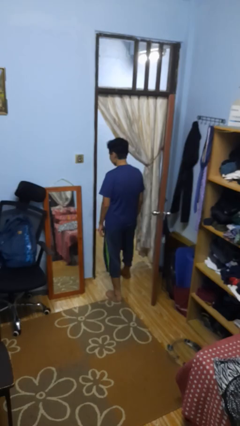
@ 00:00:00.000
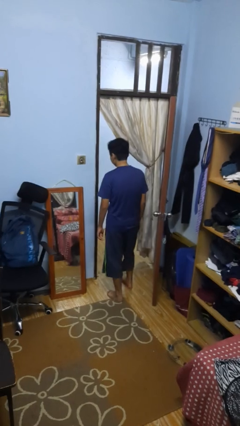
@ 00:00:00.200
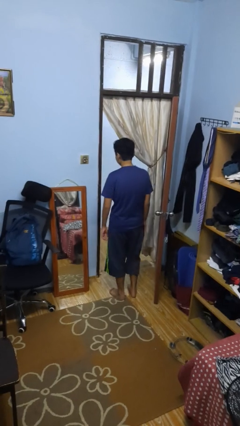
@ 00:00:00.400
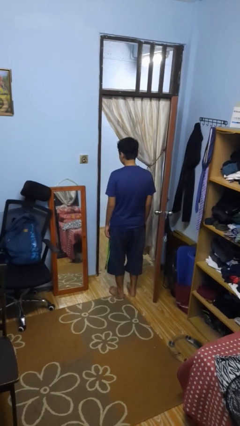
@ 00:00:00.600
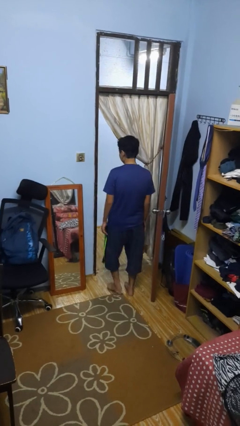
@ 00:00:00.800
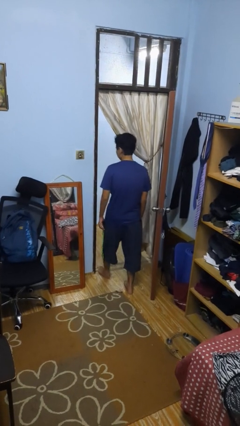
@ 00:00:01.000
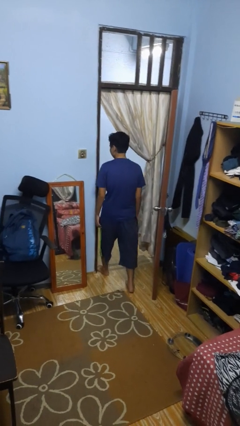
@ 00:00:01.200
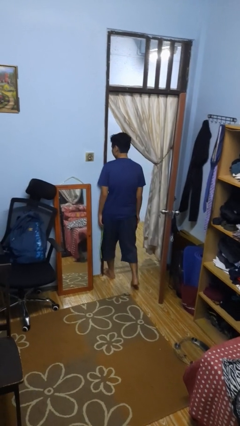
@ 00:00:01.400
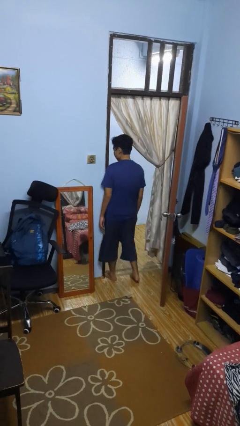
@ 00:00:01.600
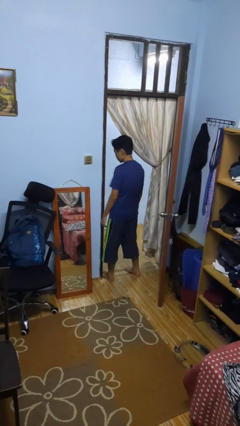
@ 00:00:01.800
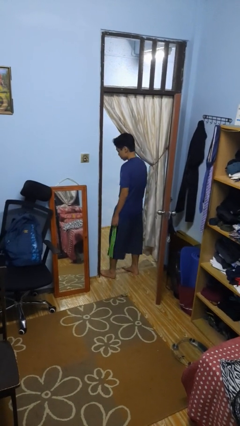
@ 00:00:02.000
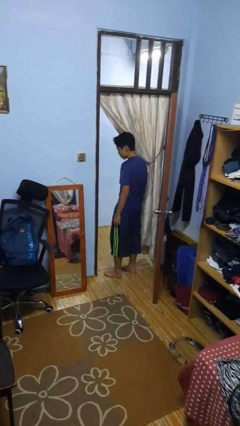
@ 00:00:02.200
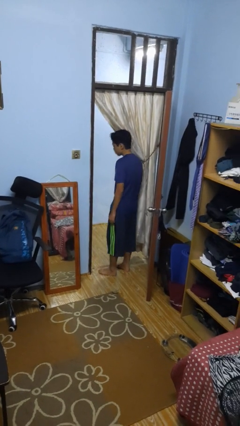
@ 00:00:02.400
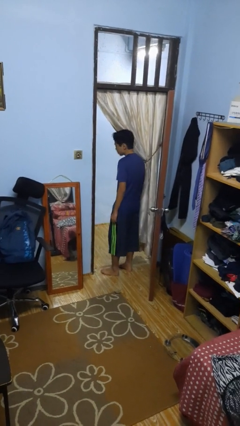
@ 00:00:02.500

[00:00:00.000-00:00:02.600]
person bumps into wall

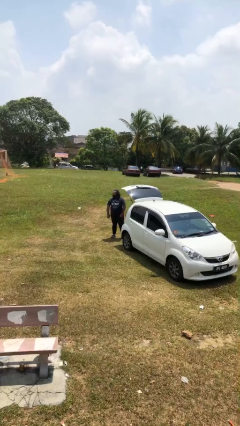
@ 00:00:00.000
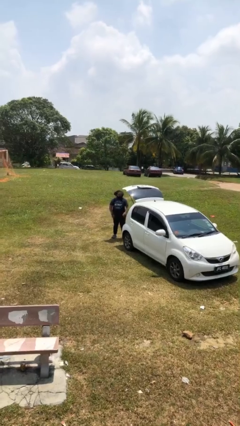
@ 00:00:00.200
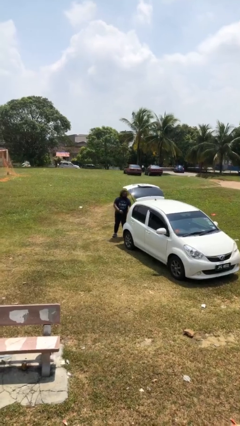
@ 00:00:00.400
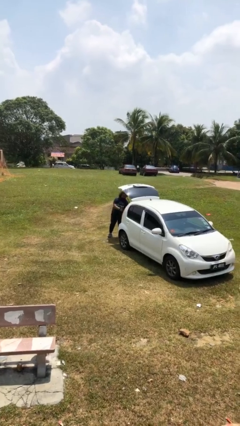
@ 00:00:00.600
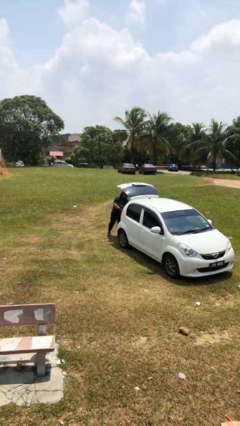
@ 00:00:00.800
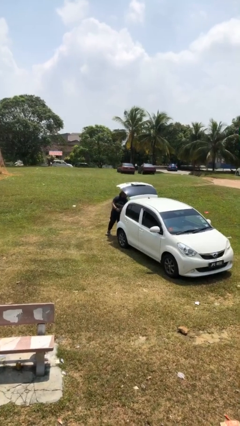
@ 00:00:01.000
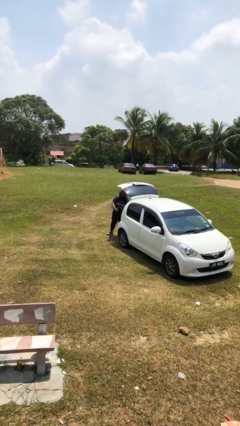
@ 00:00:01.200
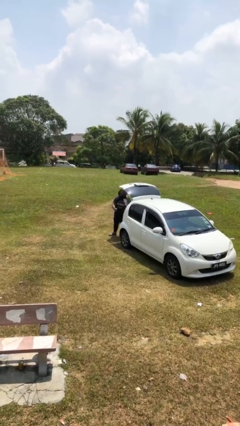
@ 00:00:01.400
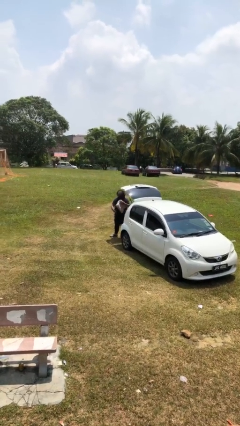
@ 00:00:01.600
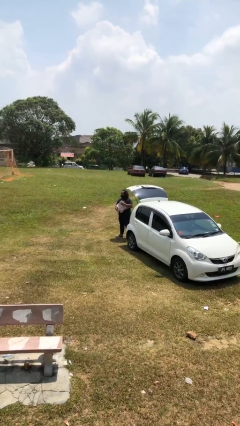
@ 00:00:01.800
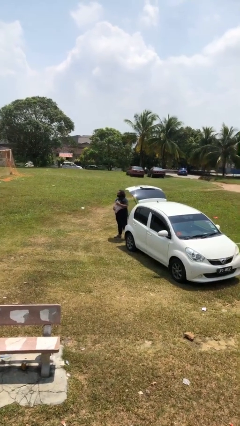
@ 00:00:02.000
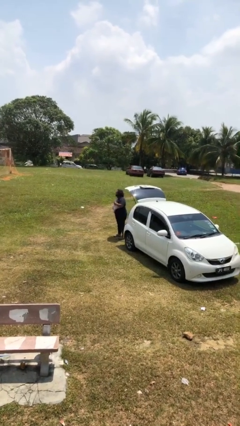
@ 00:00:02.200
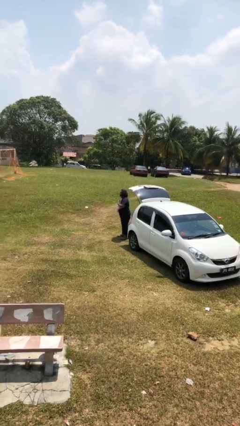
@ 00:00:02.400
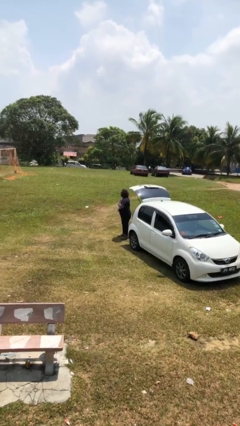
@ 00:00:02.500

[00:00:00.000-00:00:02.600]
person unloads car

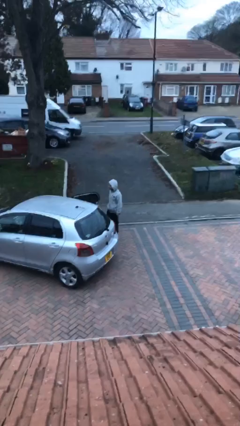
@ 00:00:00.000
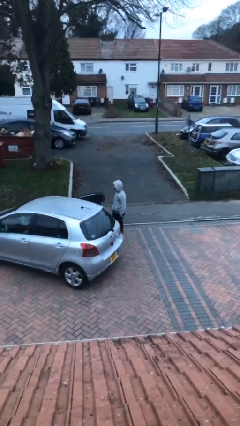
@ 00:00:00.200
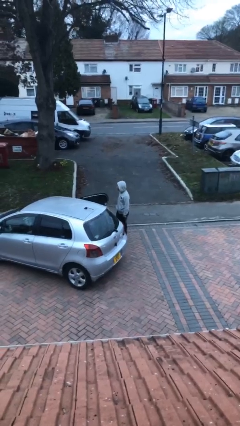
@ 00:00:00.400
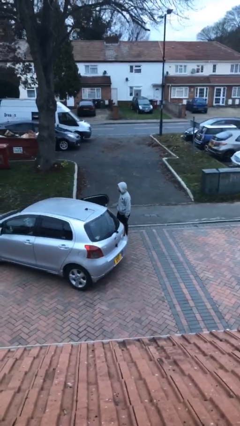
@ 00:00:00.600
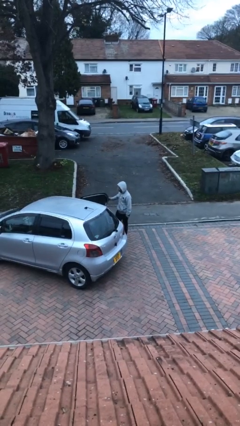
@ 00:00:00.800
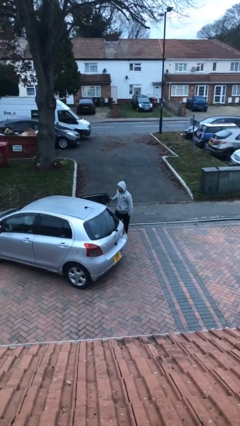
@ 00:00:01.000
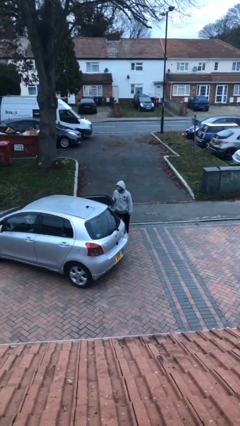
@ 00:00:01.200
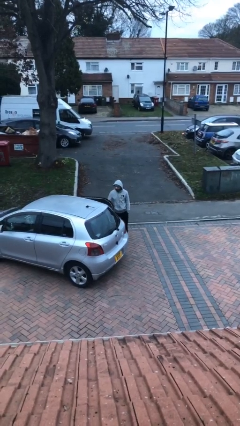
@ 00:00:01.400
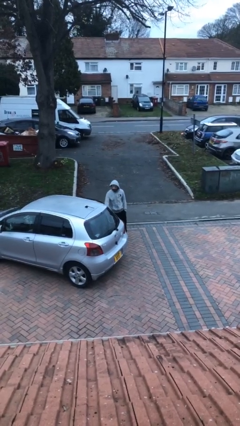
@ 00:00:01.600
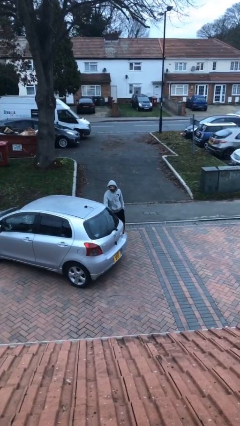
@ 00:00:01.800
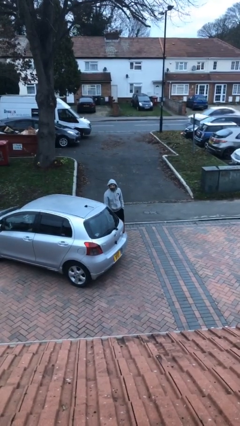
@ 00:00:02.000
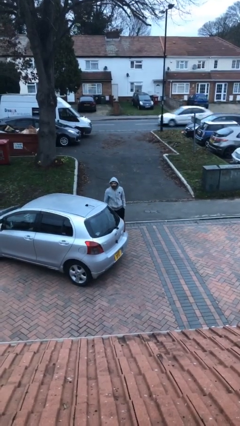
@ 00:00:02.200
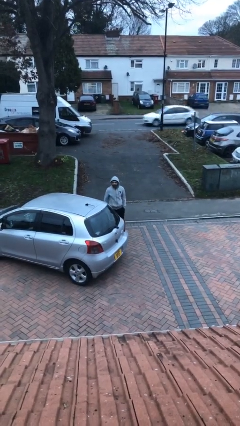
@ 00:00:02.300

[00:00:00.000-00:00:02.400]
person closes car door

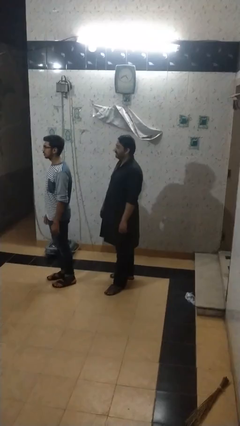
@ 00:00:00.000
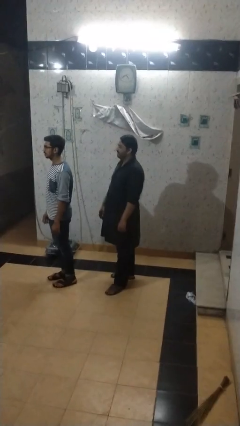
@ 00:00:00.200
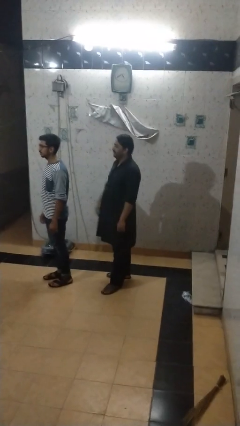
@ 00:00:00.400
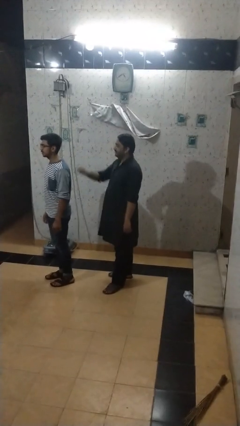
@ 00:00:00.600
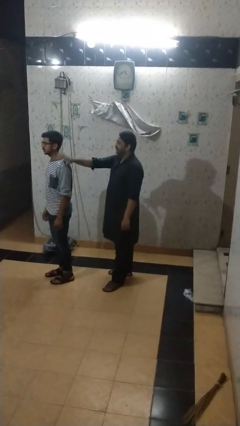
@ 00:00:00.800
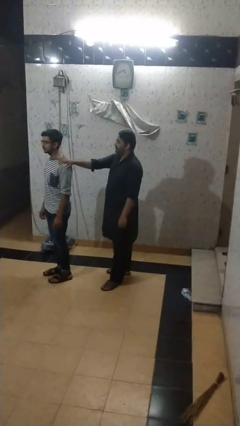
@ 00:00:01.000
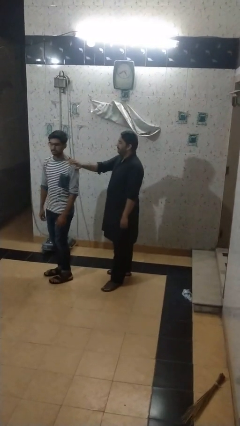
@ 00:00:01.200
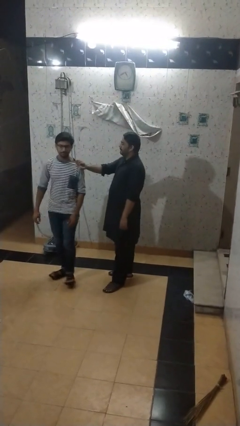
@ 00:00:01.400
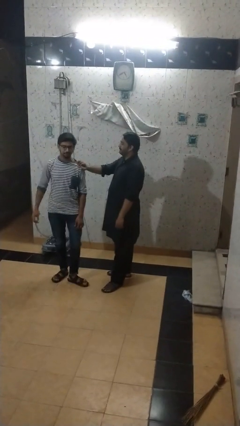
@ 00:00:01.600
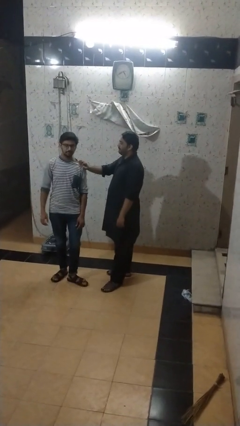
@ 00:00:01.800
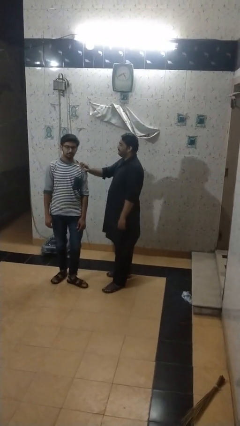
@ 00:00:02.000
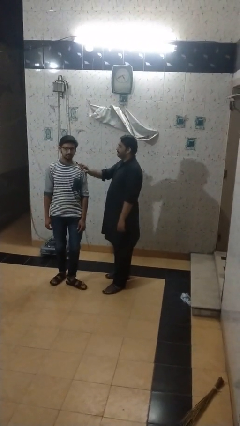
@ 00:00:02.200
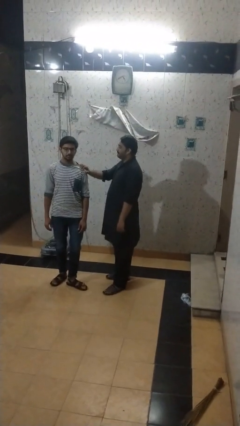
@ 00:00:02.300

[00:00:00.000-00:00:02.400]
person grabs person by shoulder

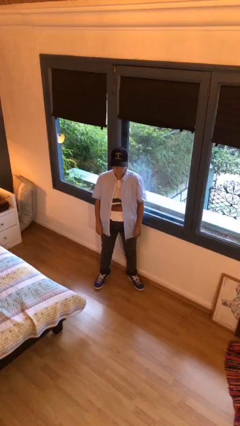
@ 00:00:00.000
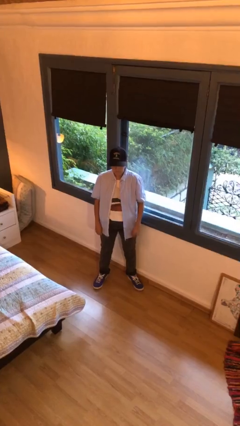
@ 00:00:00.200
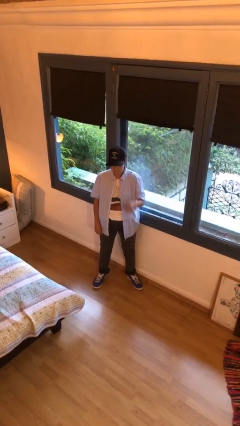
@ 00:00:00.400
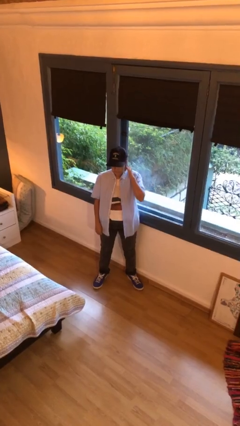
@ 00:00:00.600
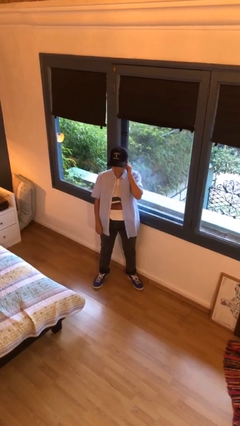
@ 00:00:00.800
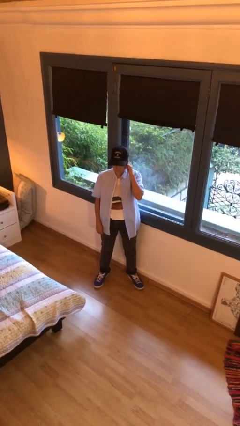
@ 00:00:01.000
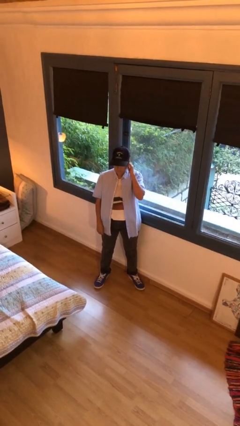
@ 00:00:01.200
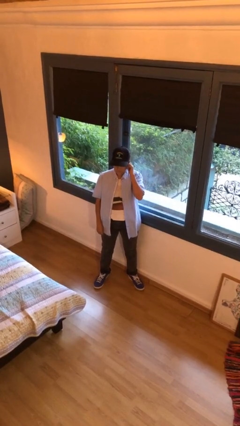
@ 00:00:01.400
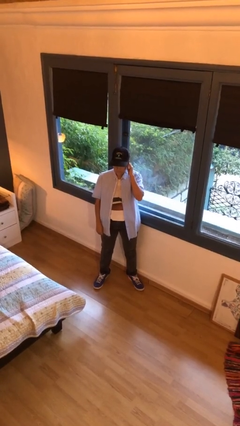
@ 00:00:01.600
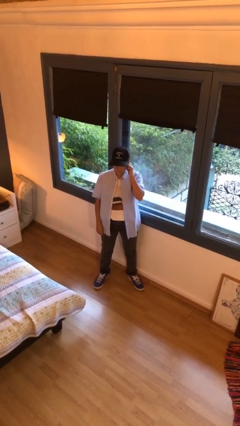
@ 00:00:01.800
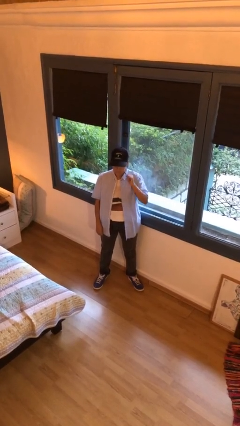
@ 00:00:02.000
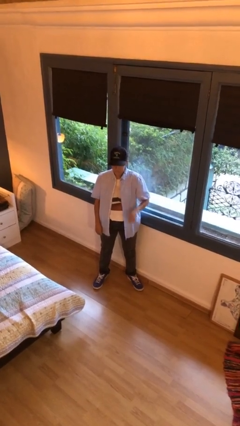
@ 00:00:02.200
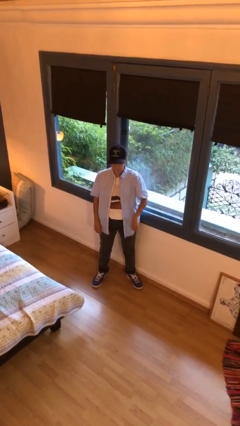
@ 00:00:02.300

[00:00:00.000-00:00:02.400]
person touches earlobe

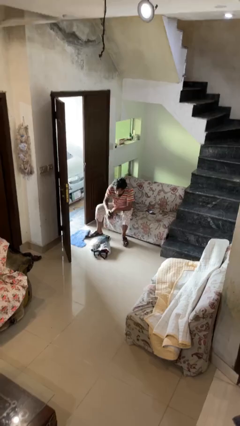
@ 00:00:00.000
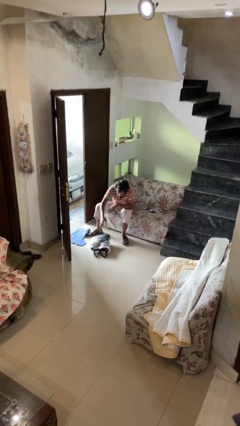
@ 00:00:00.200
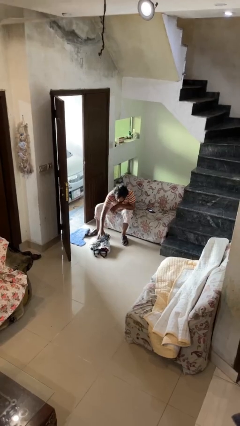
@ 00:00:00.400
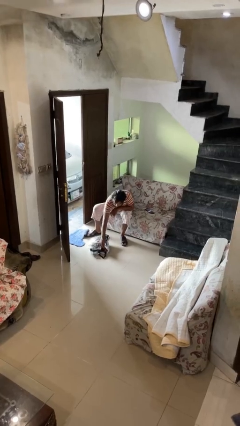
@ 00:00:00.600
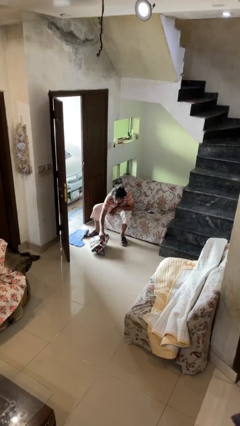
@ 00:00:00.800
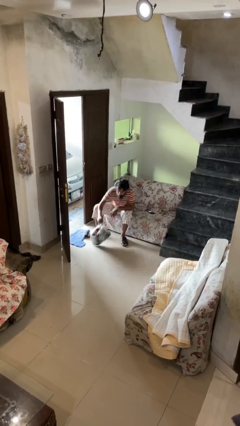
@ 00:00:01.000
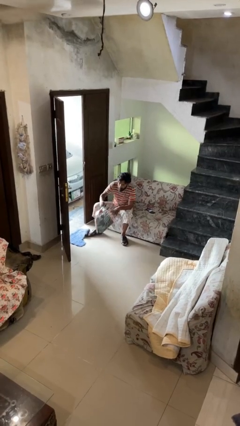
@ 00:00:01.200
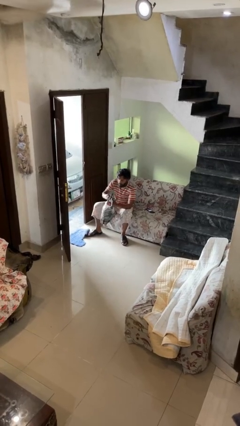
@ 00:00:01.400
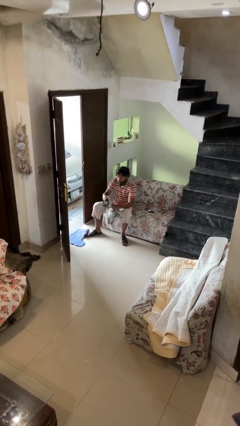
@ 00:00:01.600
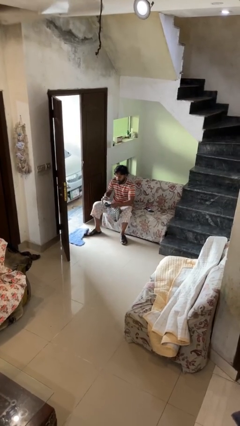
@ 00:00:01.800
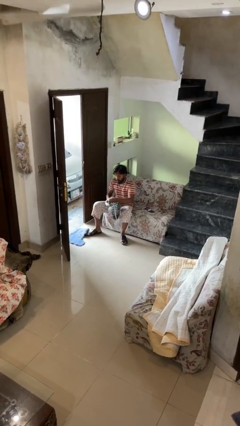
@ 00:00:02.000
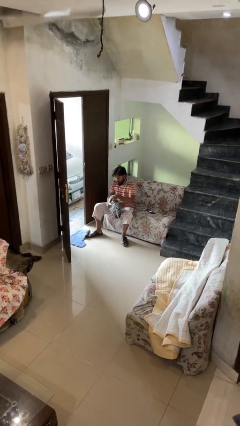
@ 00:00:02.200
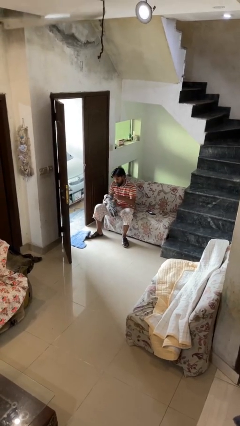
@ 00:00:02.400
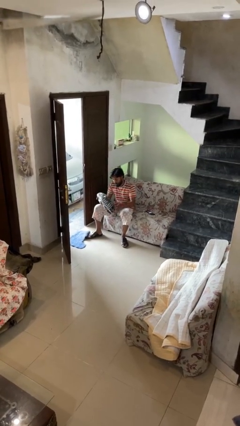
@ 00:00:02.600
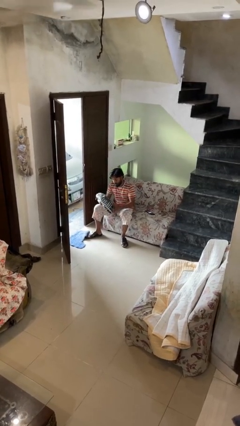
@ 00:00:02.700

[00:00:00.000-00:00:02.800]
person picks up object from floor

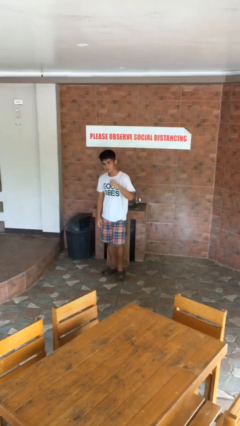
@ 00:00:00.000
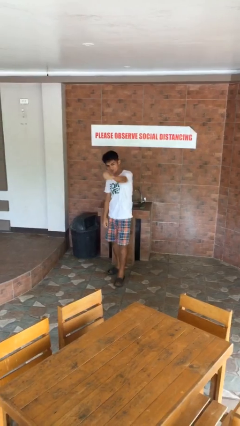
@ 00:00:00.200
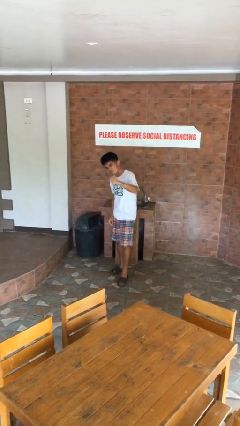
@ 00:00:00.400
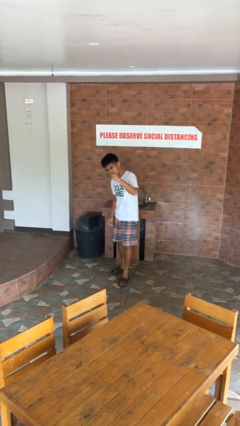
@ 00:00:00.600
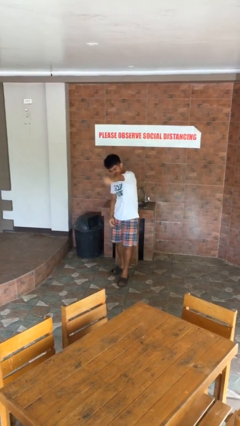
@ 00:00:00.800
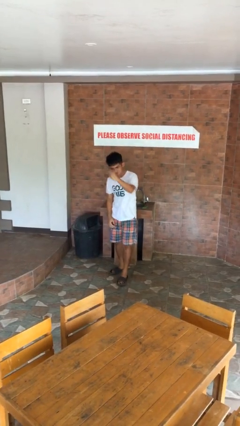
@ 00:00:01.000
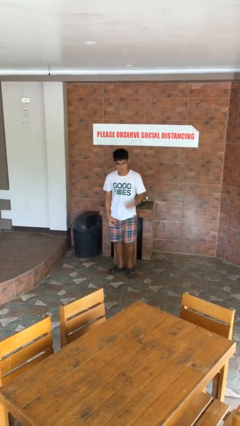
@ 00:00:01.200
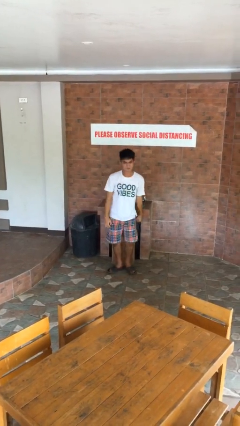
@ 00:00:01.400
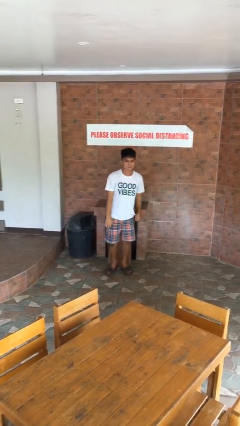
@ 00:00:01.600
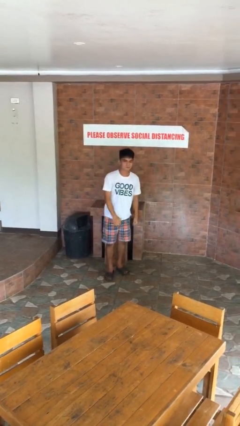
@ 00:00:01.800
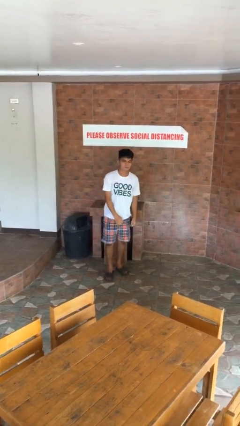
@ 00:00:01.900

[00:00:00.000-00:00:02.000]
person punches
